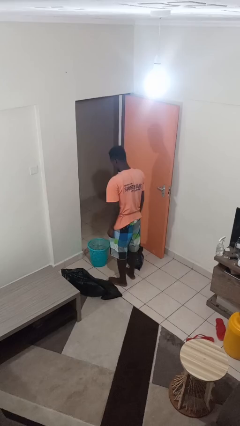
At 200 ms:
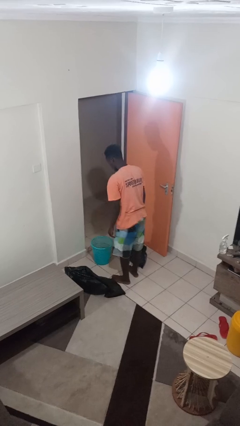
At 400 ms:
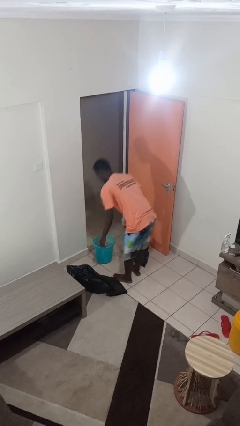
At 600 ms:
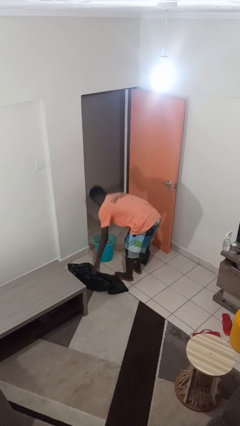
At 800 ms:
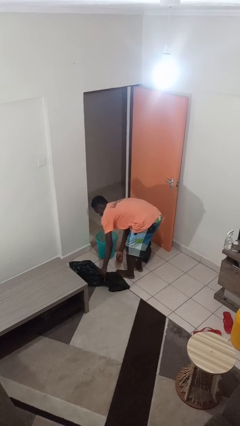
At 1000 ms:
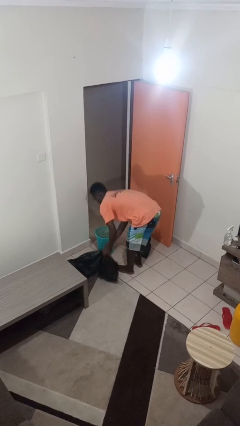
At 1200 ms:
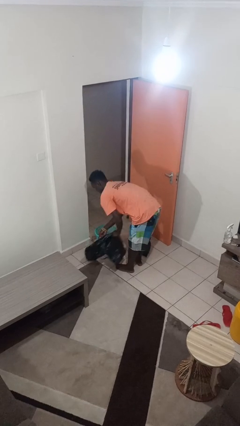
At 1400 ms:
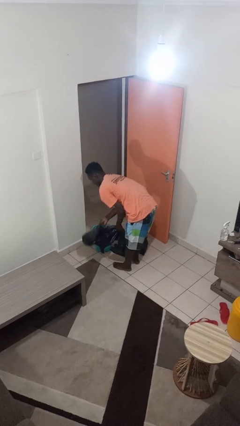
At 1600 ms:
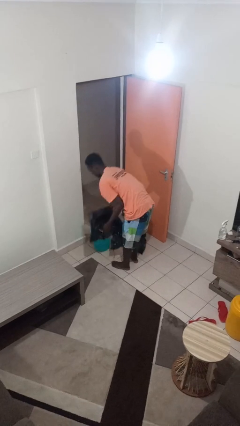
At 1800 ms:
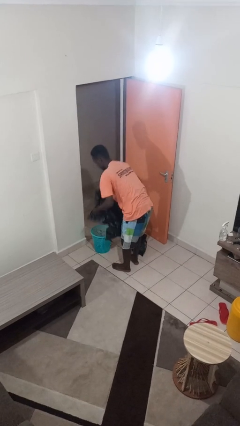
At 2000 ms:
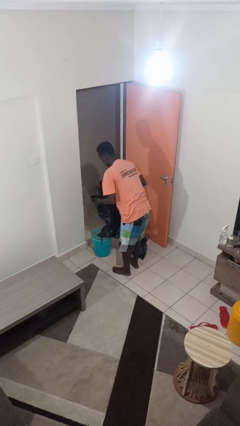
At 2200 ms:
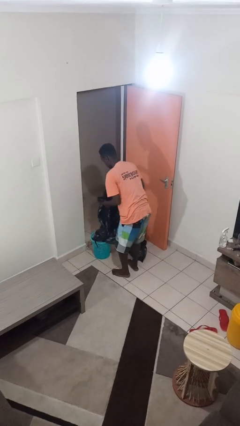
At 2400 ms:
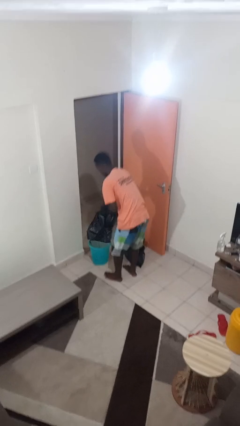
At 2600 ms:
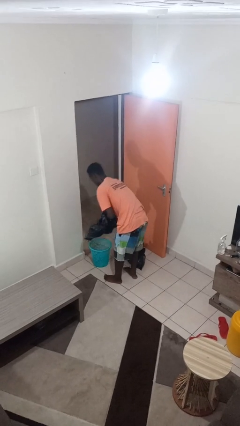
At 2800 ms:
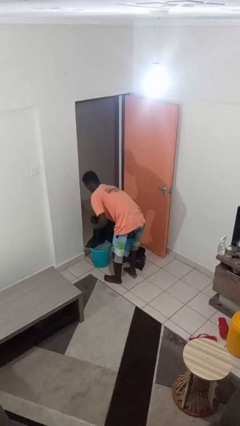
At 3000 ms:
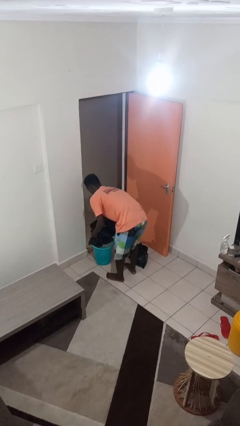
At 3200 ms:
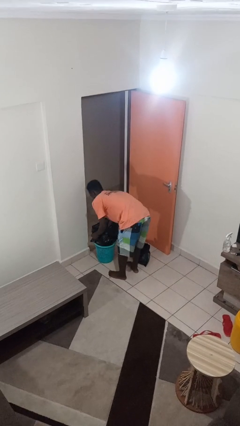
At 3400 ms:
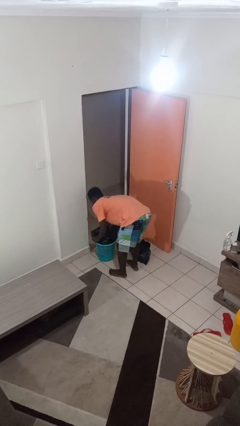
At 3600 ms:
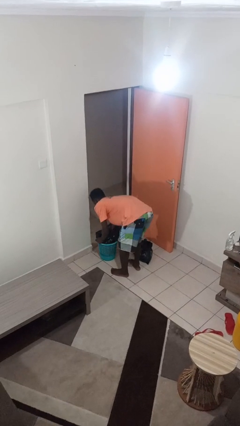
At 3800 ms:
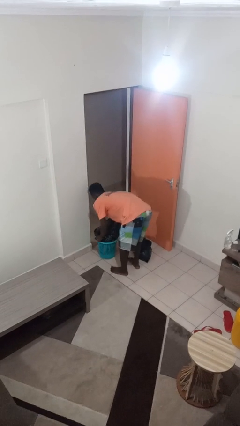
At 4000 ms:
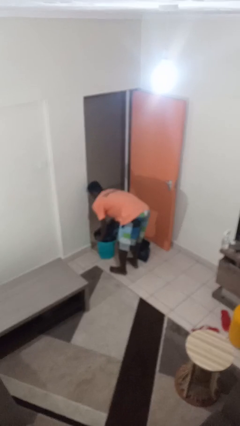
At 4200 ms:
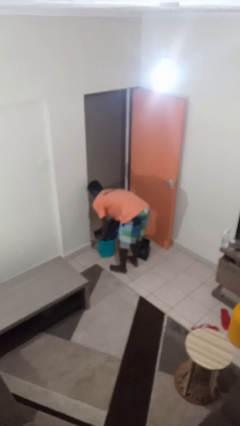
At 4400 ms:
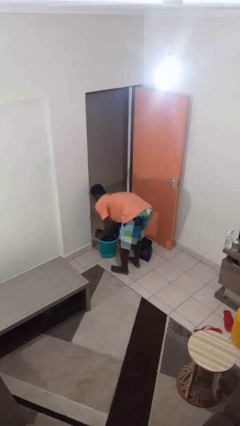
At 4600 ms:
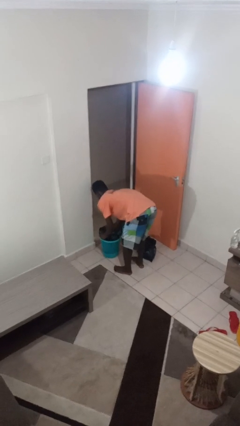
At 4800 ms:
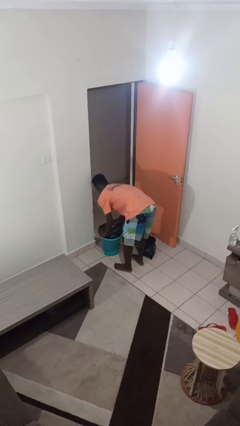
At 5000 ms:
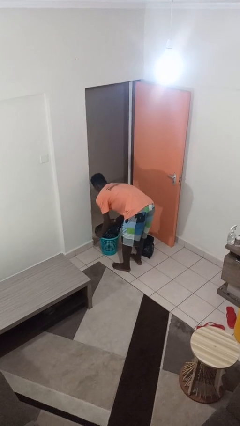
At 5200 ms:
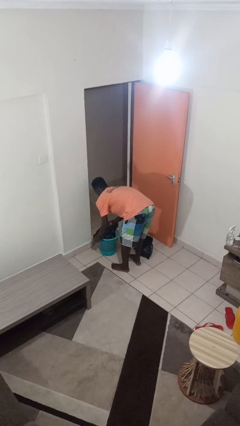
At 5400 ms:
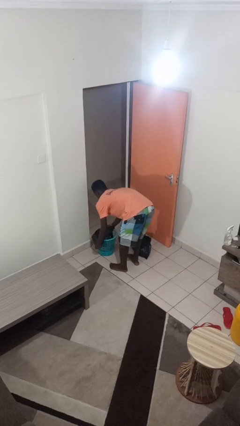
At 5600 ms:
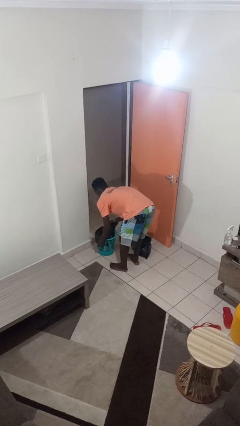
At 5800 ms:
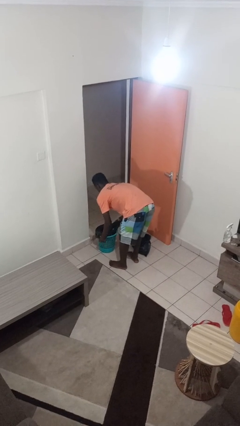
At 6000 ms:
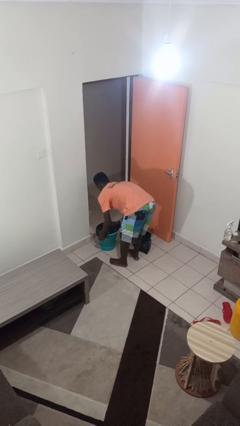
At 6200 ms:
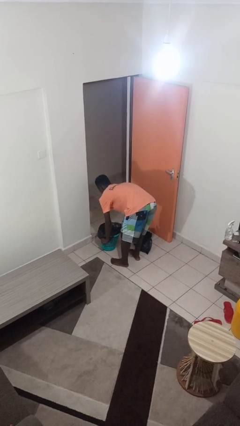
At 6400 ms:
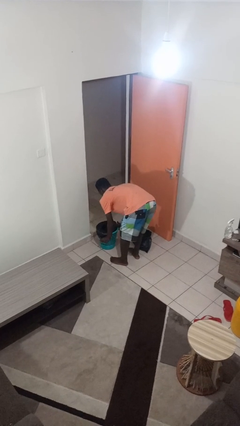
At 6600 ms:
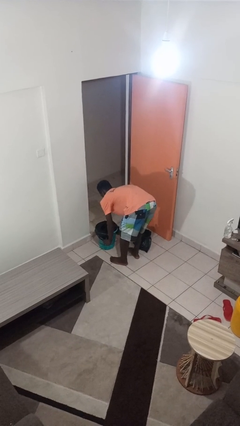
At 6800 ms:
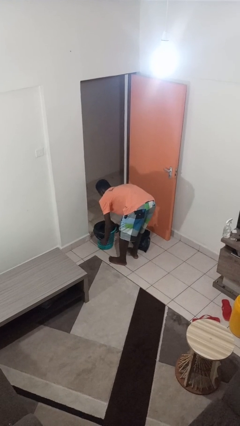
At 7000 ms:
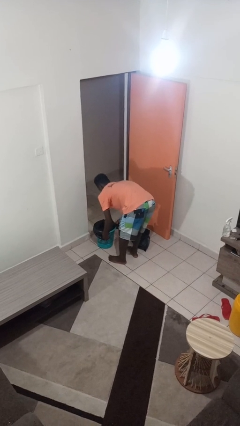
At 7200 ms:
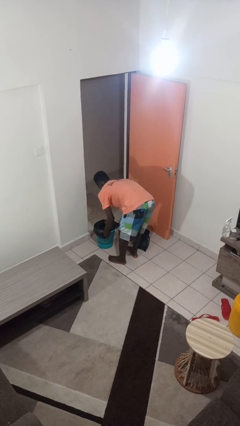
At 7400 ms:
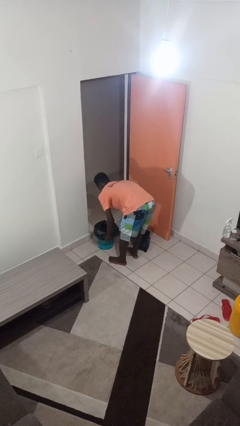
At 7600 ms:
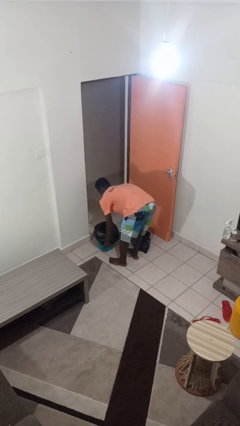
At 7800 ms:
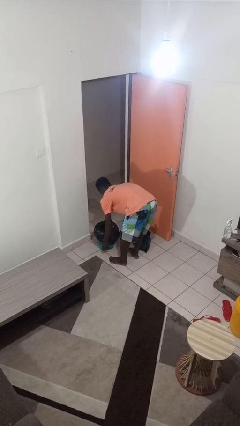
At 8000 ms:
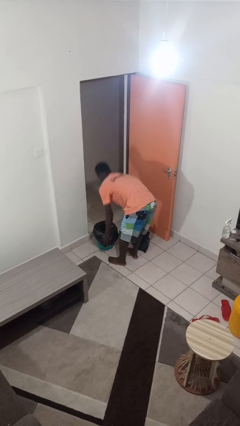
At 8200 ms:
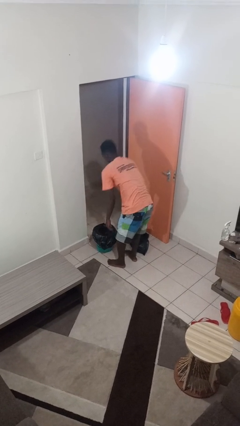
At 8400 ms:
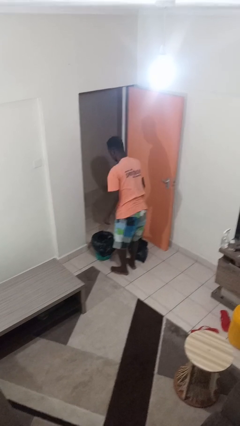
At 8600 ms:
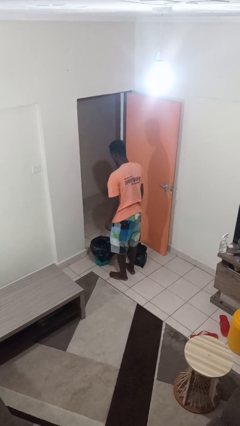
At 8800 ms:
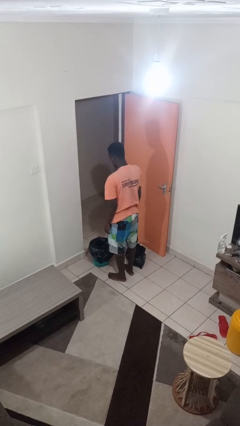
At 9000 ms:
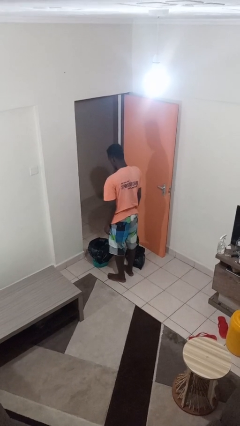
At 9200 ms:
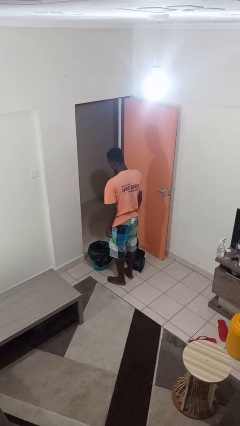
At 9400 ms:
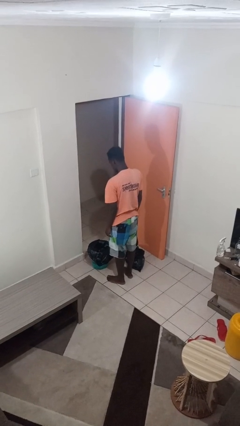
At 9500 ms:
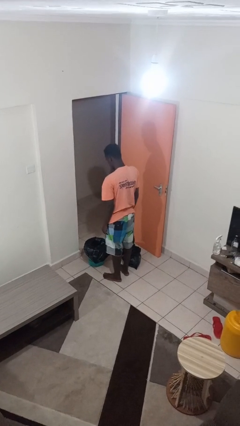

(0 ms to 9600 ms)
person inserts trashbag into trashcan

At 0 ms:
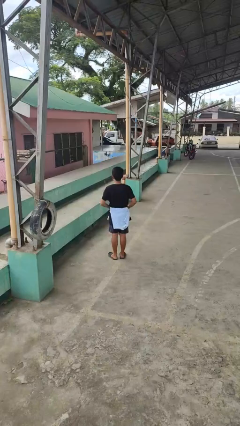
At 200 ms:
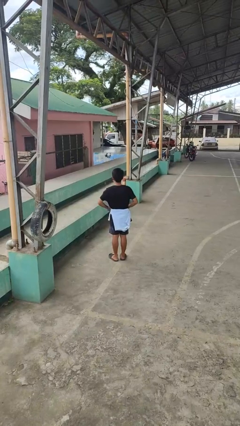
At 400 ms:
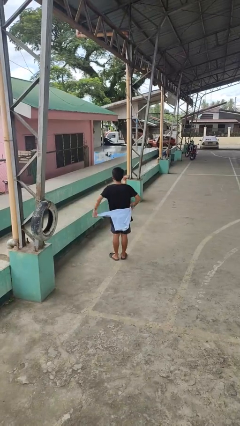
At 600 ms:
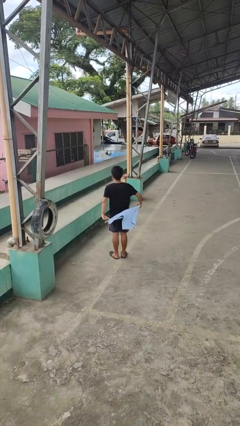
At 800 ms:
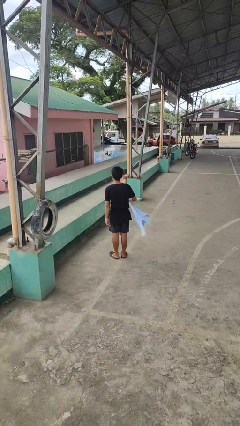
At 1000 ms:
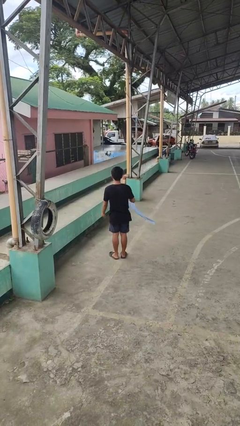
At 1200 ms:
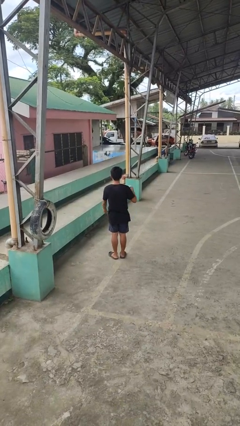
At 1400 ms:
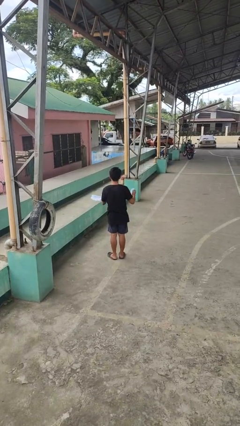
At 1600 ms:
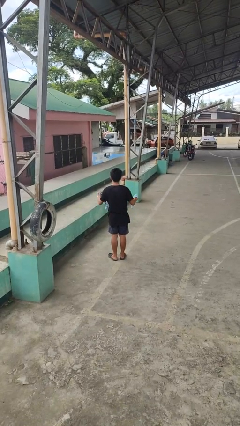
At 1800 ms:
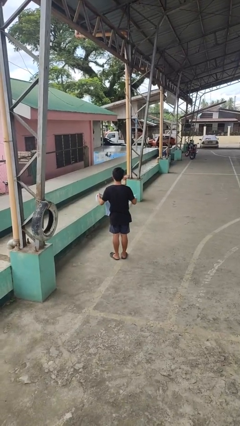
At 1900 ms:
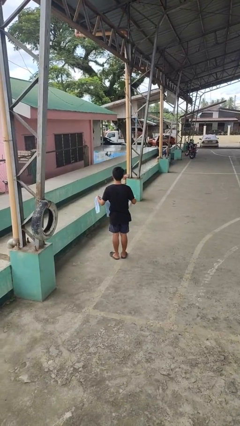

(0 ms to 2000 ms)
person unties jacket around waist

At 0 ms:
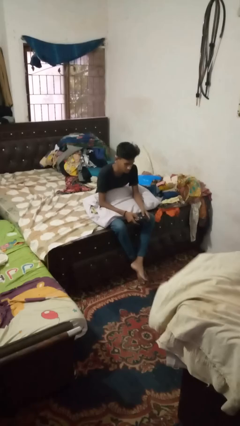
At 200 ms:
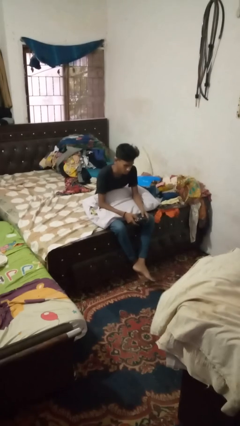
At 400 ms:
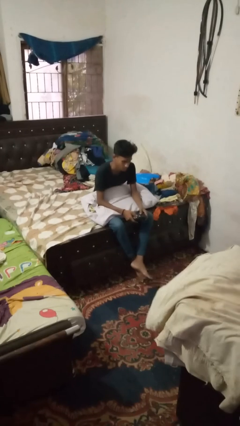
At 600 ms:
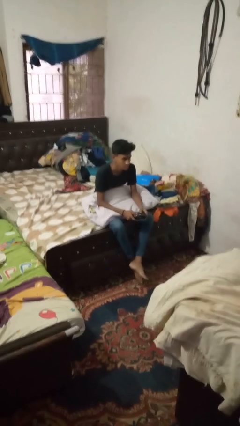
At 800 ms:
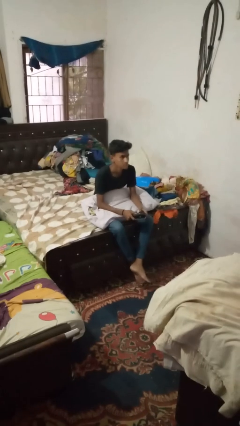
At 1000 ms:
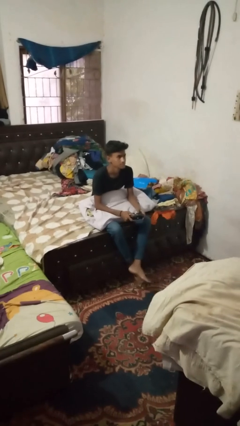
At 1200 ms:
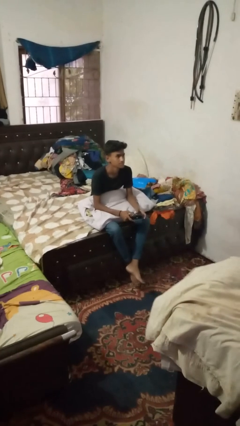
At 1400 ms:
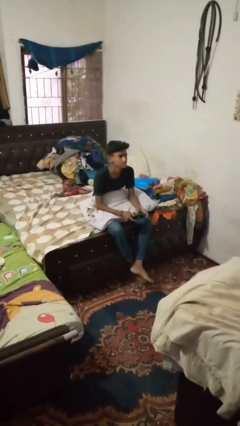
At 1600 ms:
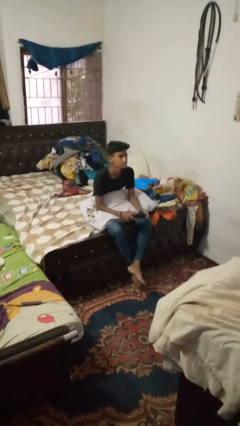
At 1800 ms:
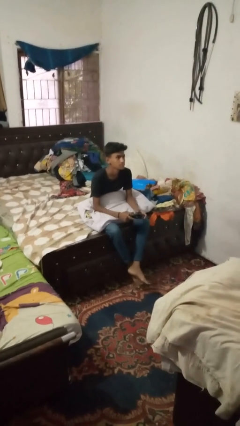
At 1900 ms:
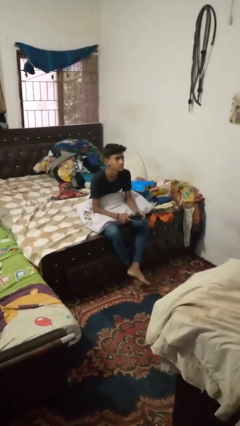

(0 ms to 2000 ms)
person interacts with handheld game

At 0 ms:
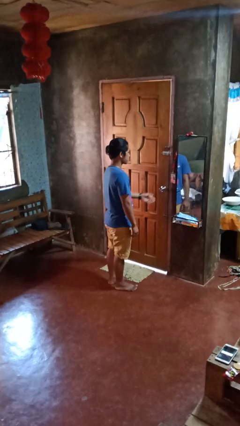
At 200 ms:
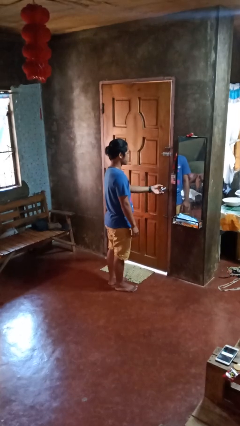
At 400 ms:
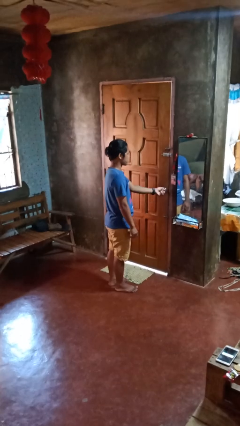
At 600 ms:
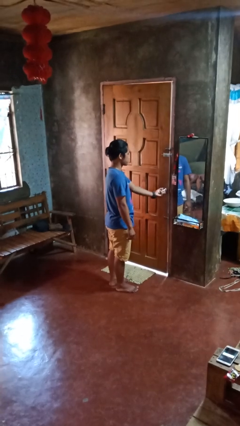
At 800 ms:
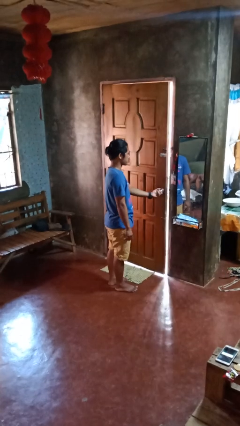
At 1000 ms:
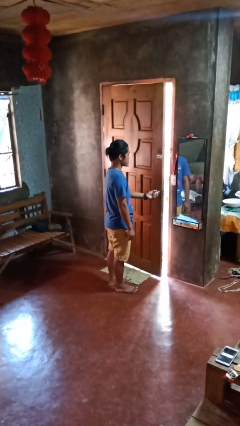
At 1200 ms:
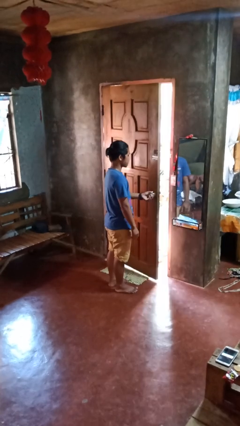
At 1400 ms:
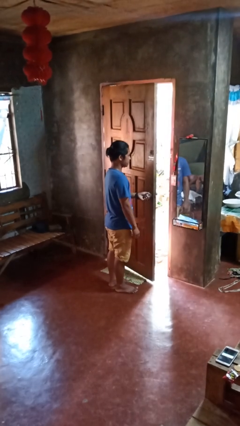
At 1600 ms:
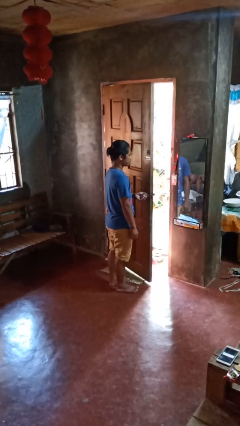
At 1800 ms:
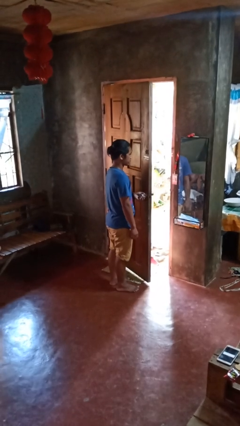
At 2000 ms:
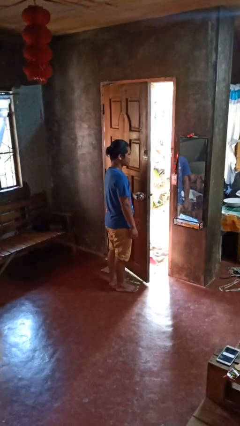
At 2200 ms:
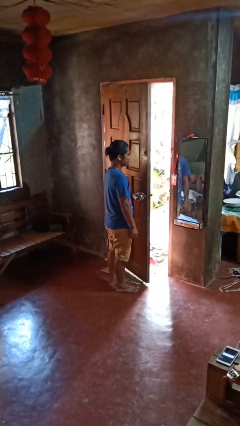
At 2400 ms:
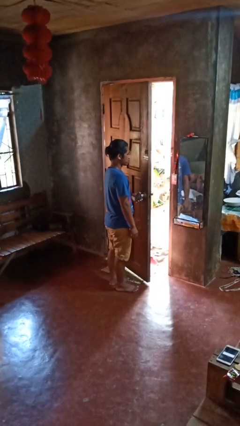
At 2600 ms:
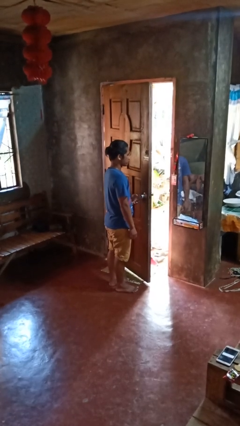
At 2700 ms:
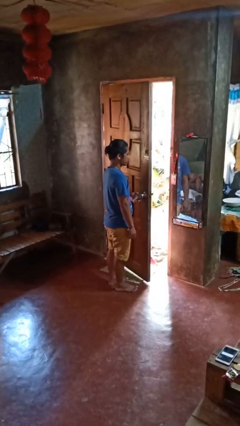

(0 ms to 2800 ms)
person opens facility door

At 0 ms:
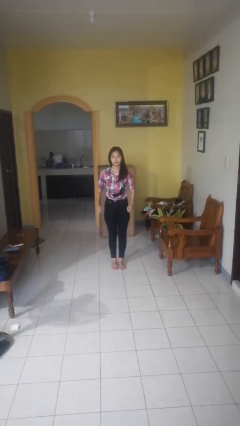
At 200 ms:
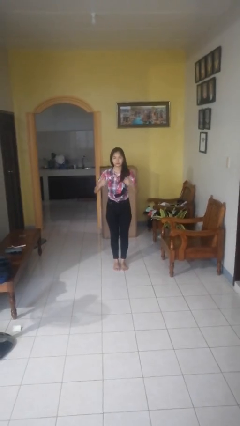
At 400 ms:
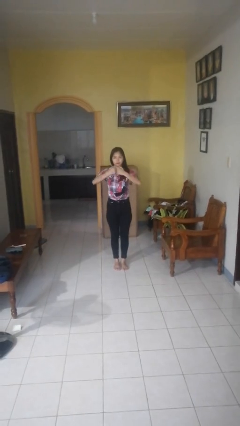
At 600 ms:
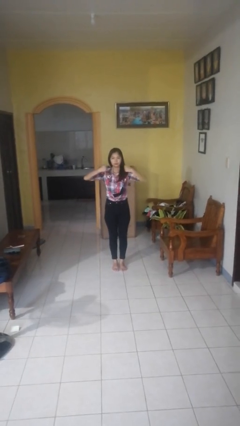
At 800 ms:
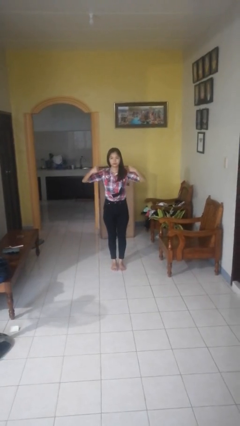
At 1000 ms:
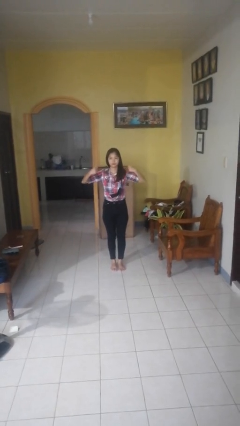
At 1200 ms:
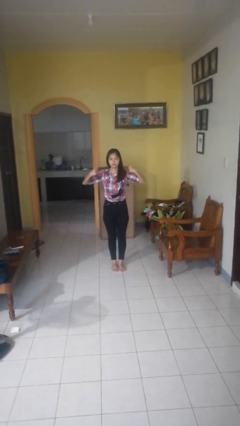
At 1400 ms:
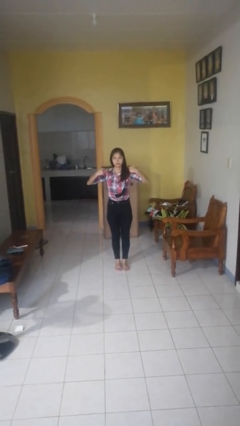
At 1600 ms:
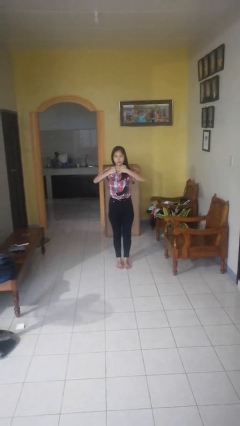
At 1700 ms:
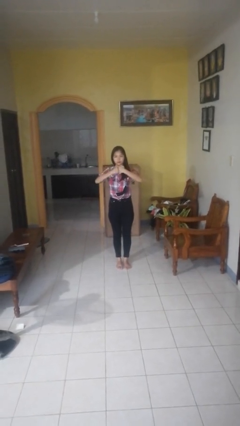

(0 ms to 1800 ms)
person gestures zoom in
